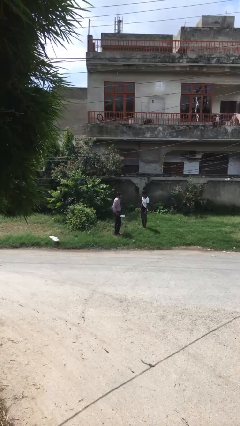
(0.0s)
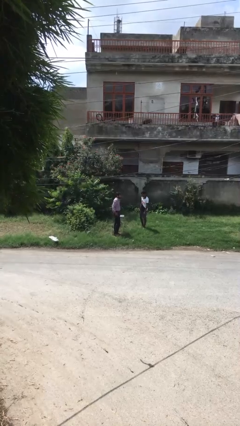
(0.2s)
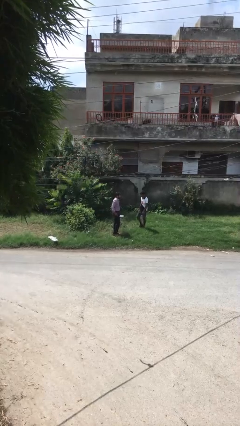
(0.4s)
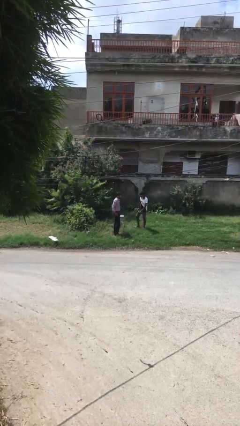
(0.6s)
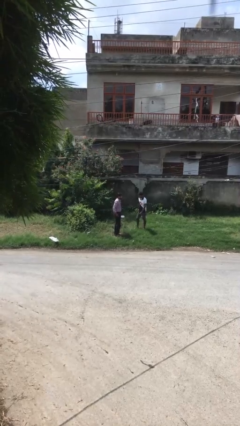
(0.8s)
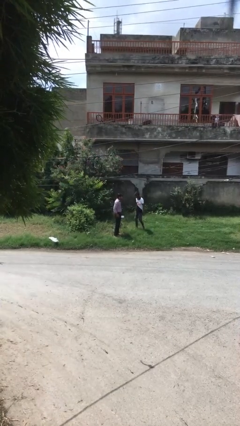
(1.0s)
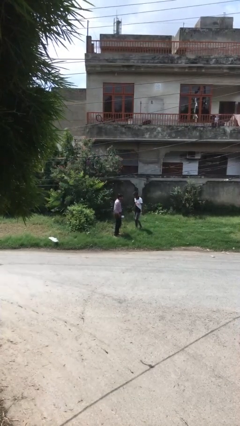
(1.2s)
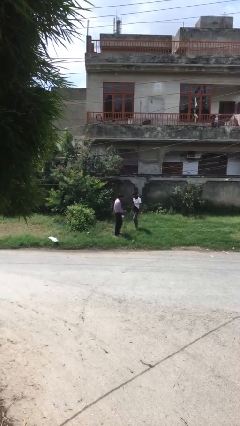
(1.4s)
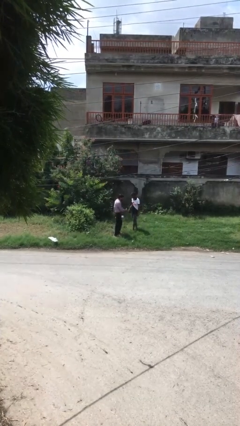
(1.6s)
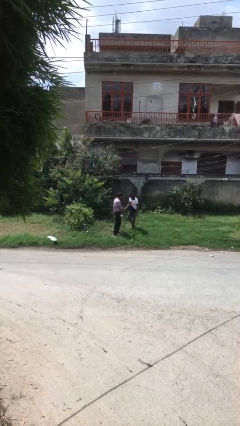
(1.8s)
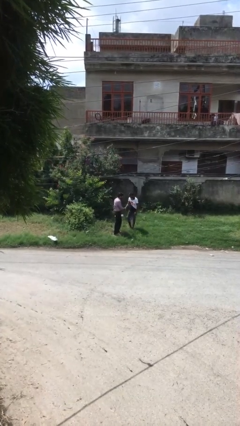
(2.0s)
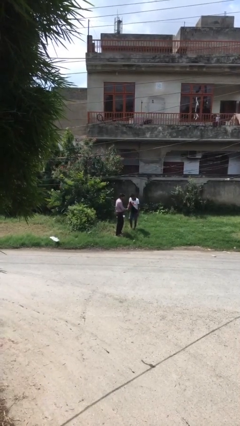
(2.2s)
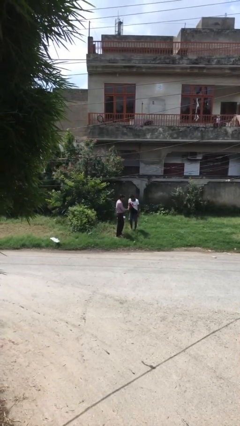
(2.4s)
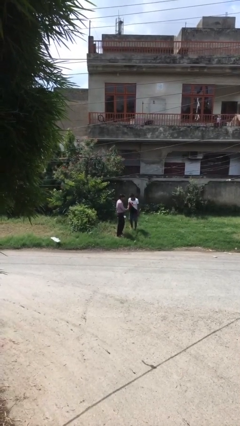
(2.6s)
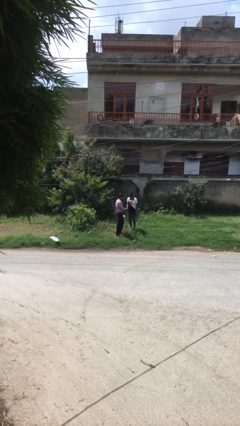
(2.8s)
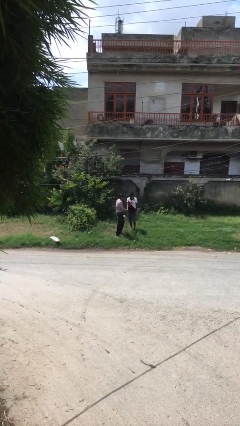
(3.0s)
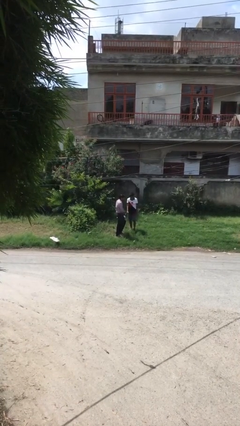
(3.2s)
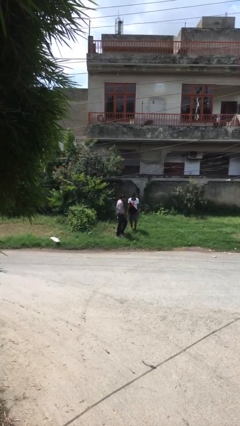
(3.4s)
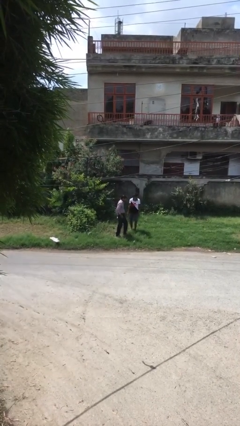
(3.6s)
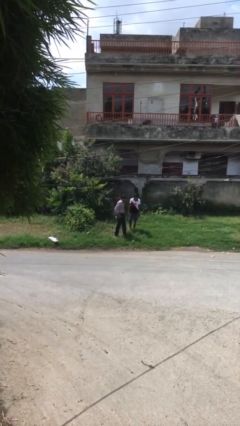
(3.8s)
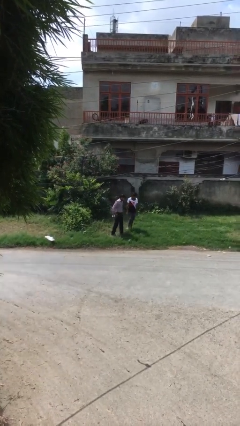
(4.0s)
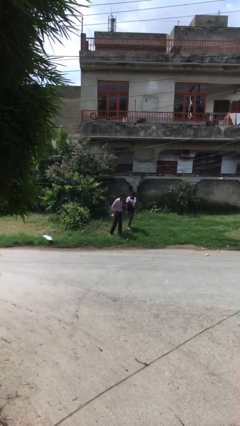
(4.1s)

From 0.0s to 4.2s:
person shakes hand

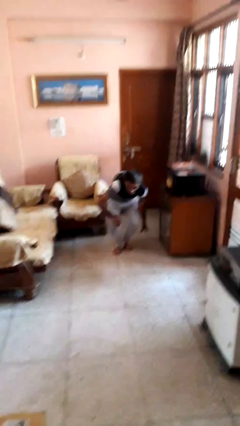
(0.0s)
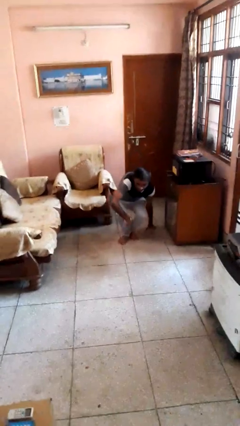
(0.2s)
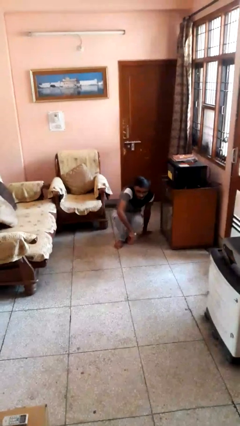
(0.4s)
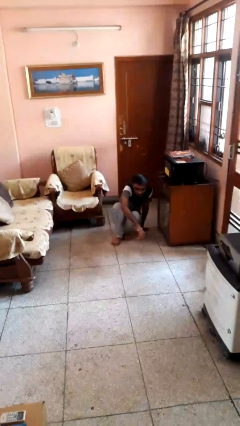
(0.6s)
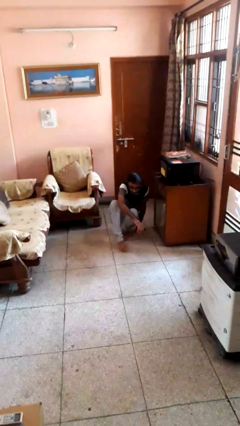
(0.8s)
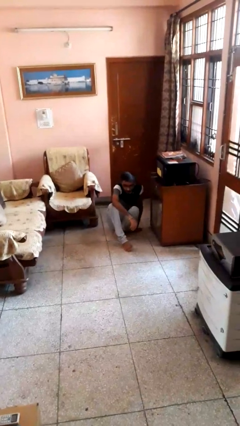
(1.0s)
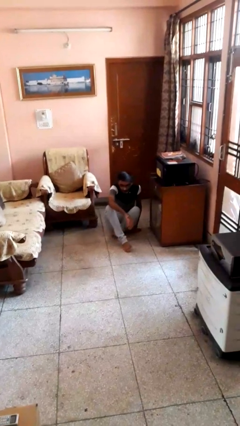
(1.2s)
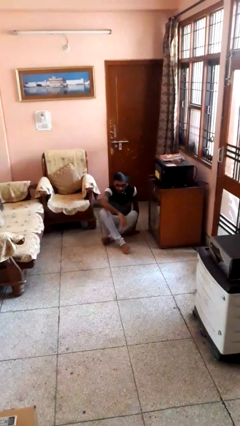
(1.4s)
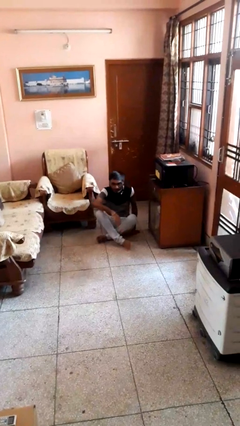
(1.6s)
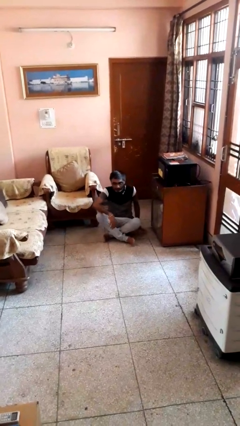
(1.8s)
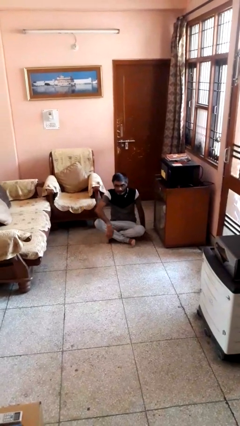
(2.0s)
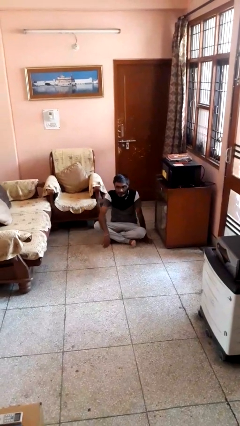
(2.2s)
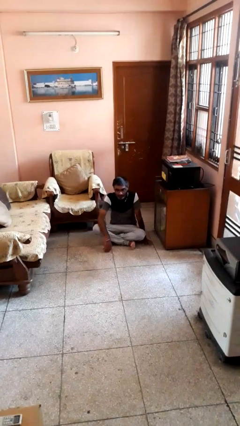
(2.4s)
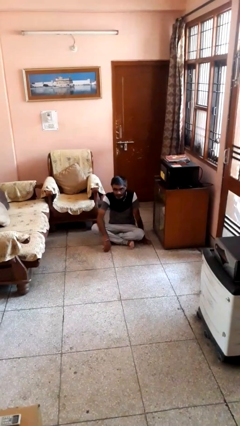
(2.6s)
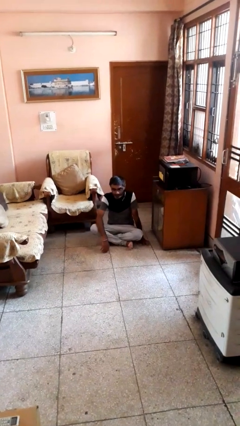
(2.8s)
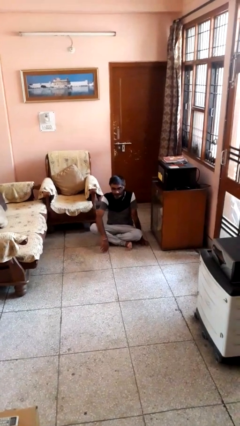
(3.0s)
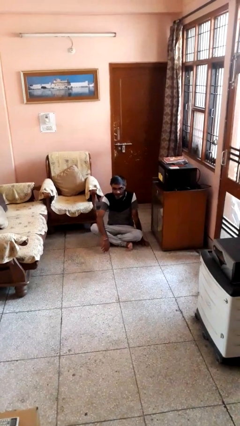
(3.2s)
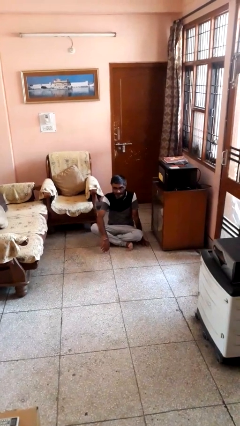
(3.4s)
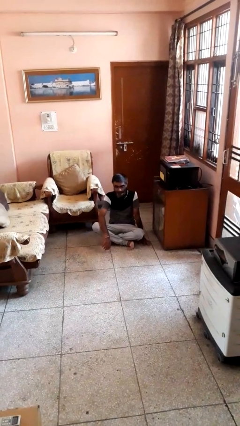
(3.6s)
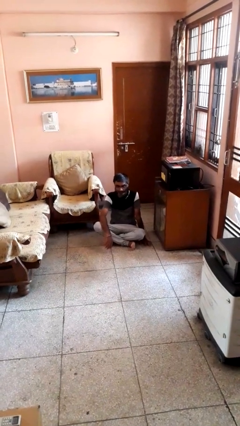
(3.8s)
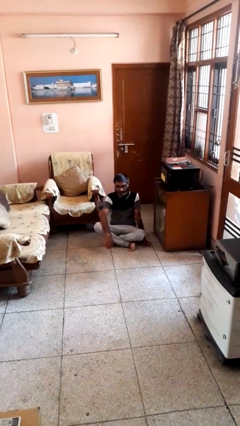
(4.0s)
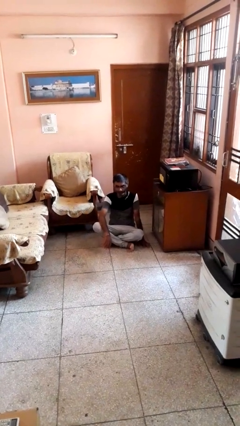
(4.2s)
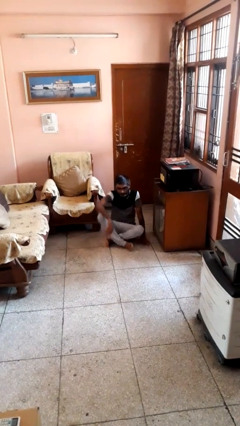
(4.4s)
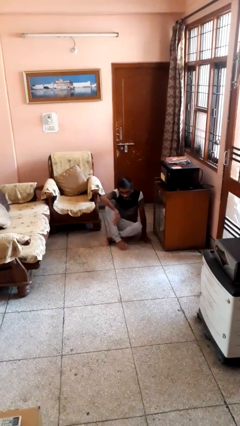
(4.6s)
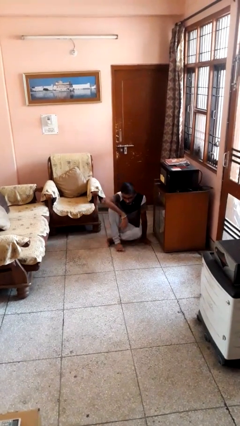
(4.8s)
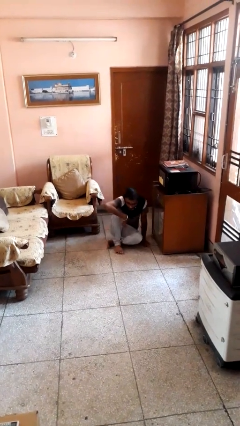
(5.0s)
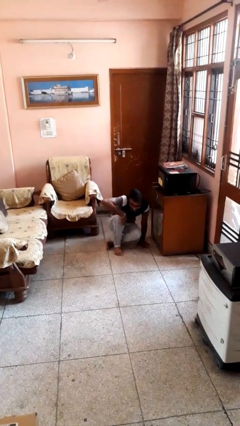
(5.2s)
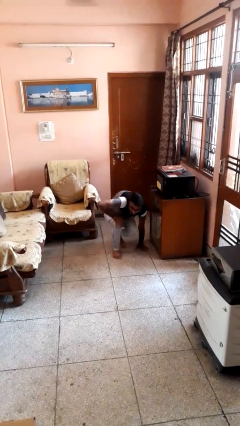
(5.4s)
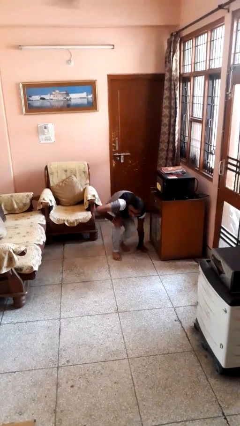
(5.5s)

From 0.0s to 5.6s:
person sits crisscross

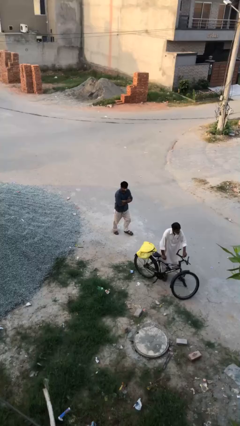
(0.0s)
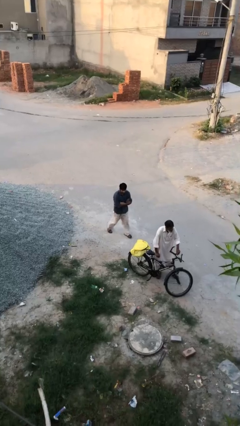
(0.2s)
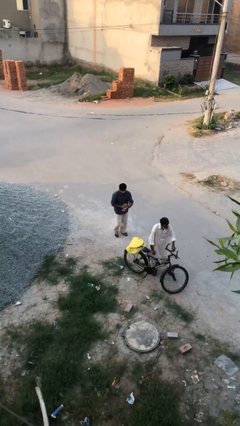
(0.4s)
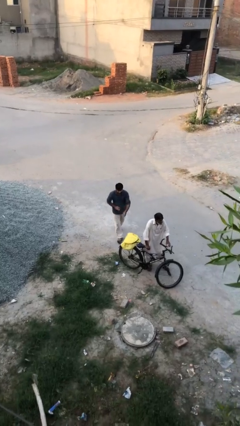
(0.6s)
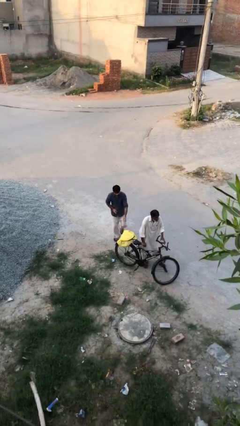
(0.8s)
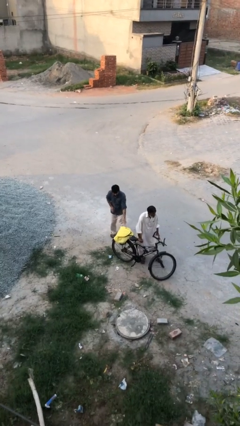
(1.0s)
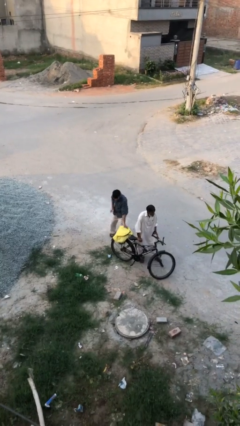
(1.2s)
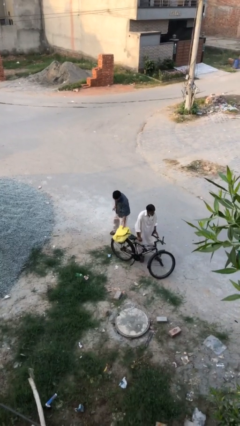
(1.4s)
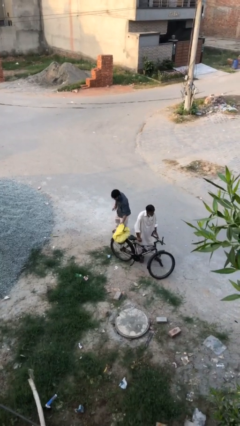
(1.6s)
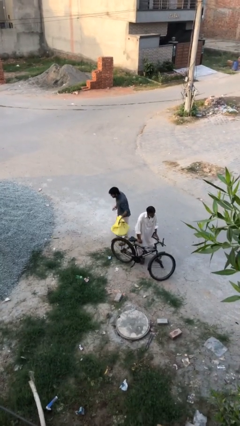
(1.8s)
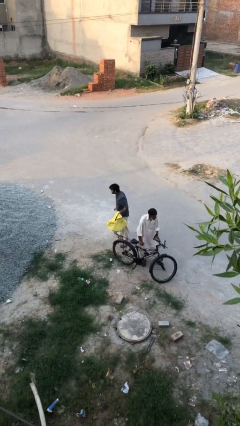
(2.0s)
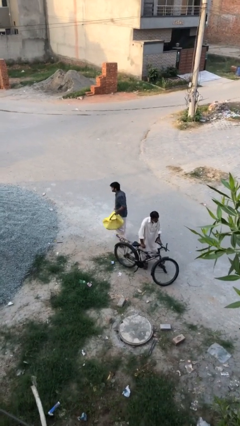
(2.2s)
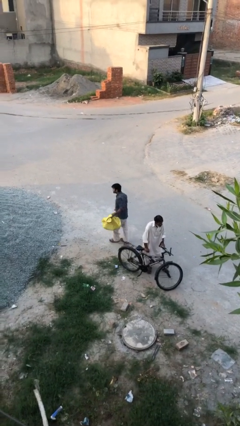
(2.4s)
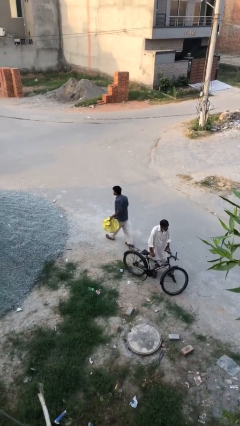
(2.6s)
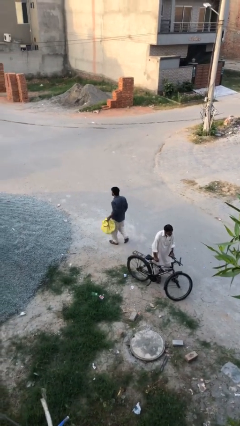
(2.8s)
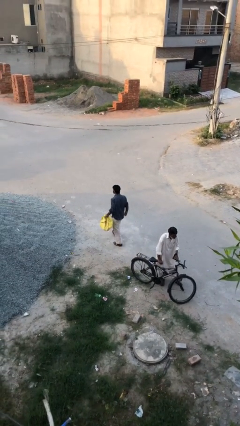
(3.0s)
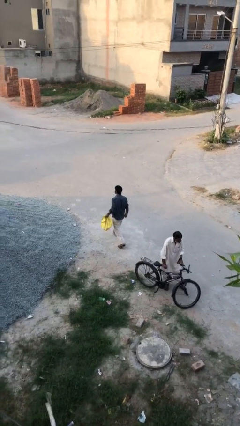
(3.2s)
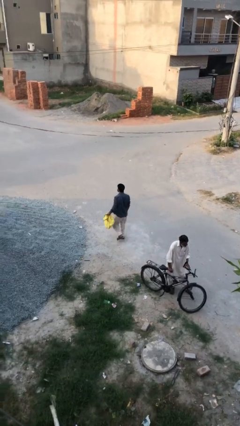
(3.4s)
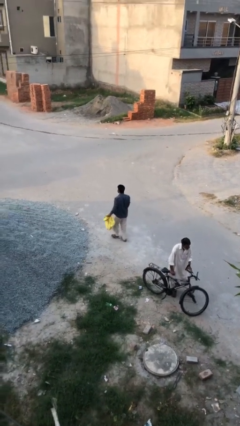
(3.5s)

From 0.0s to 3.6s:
person steals object from person

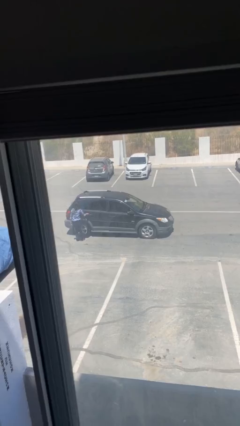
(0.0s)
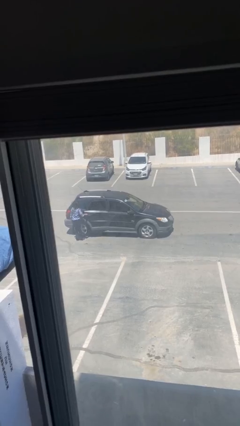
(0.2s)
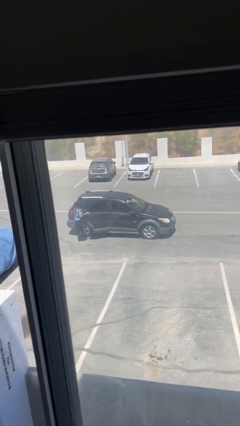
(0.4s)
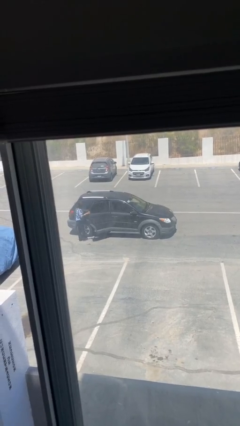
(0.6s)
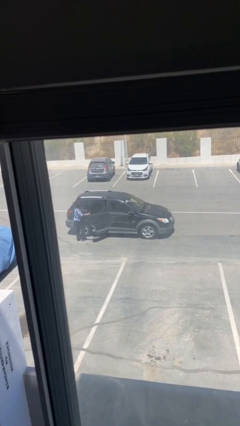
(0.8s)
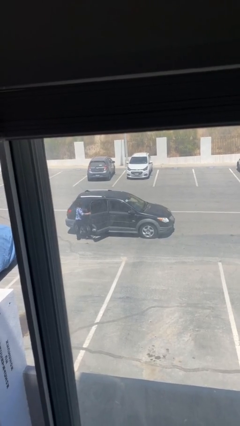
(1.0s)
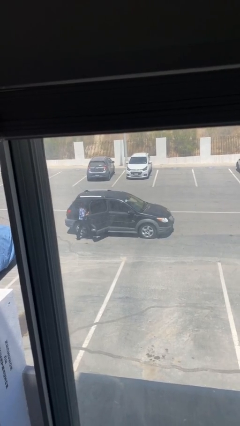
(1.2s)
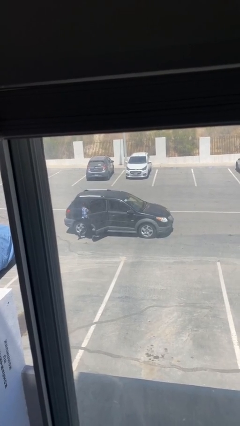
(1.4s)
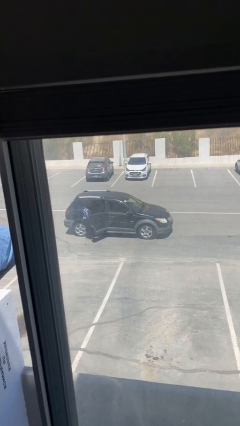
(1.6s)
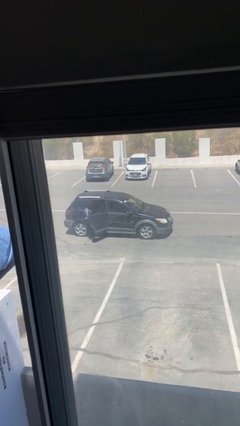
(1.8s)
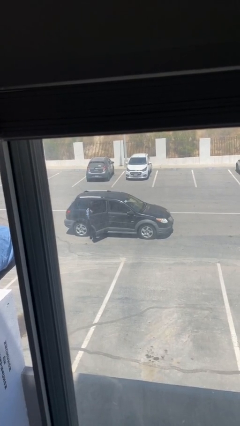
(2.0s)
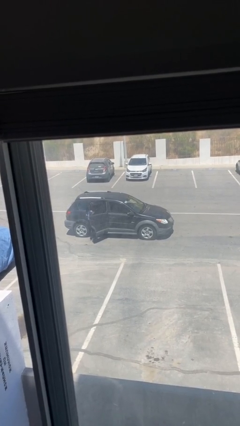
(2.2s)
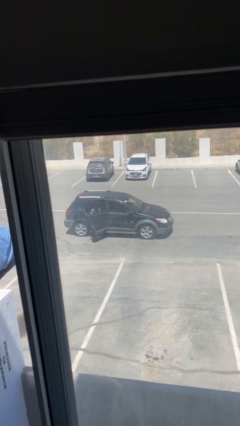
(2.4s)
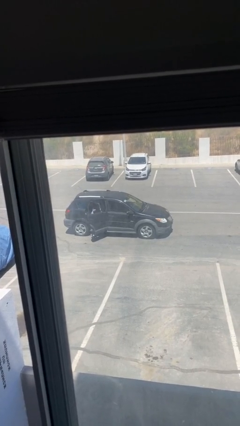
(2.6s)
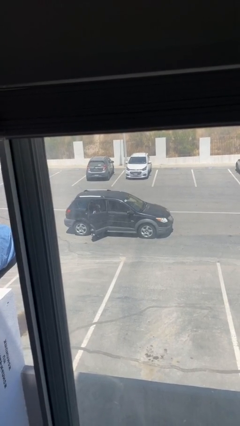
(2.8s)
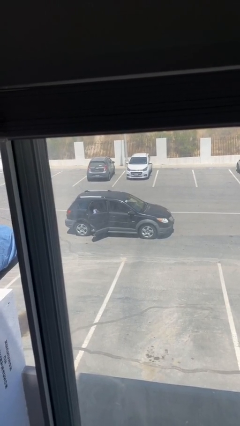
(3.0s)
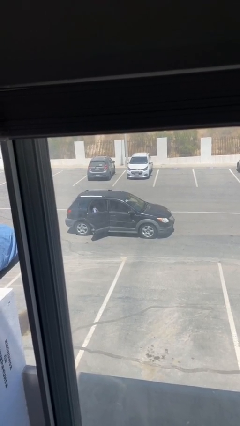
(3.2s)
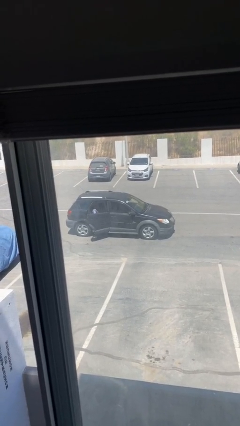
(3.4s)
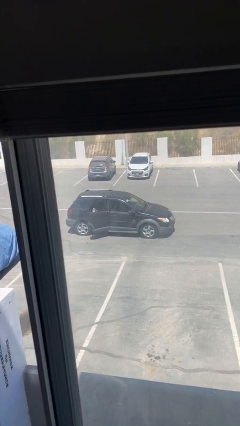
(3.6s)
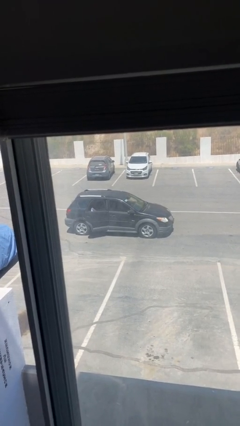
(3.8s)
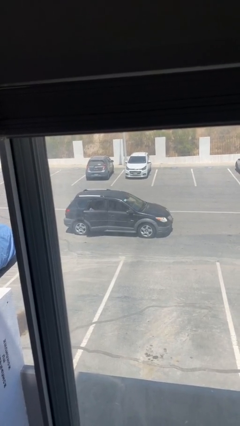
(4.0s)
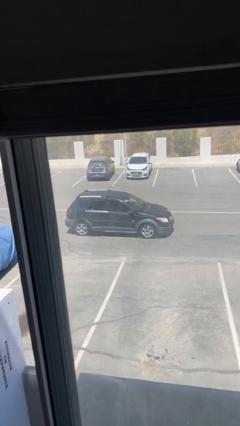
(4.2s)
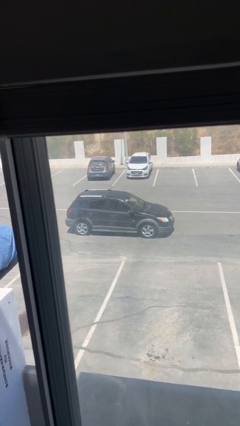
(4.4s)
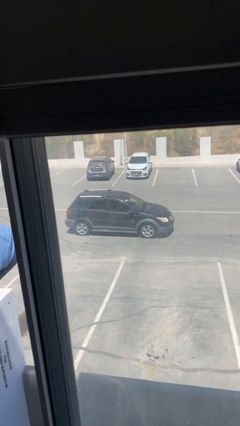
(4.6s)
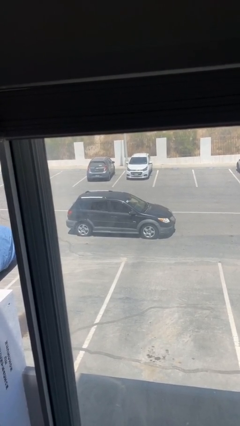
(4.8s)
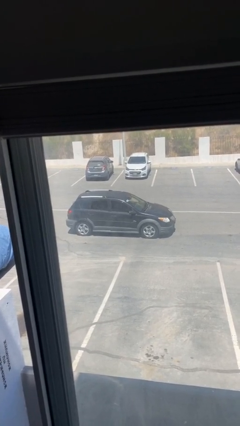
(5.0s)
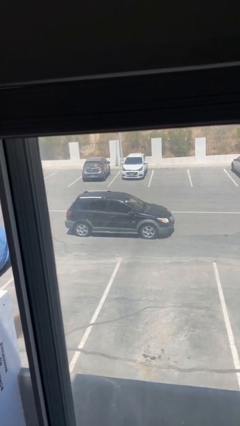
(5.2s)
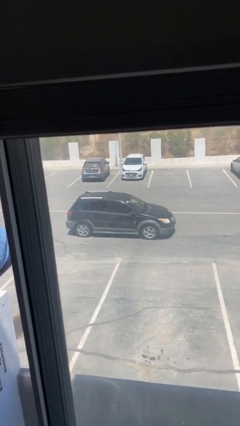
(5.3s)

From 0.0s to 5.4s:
car picks up person
